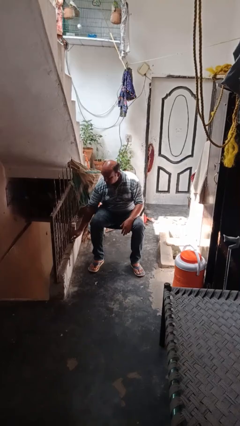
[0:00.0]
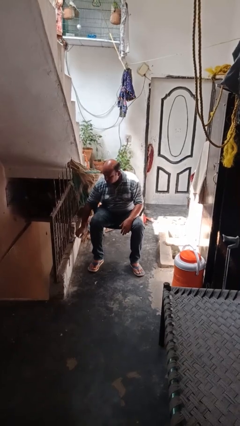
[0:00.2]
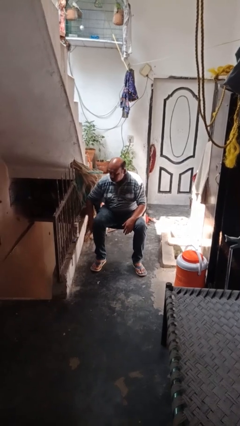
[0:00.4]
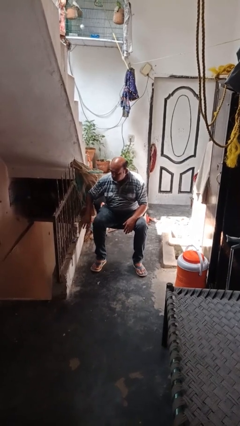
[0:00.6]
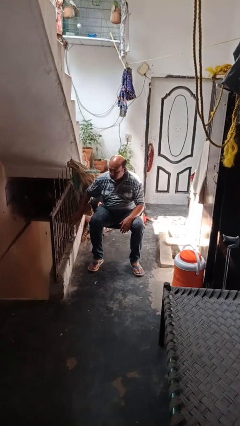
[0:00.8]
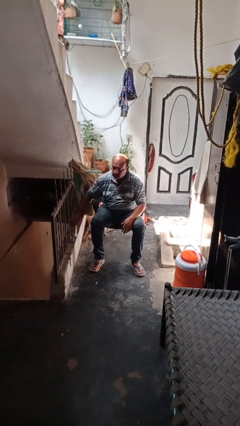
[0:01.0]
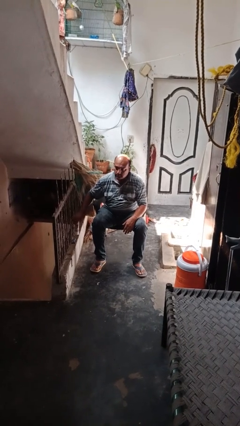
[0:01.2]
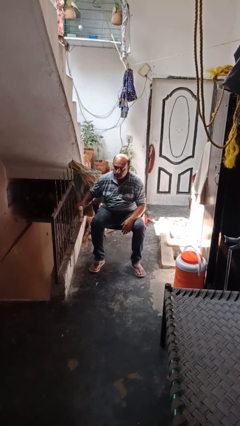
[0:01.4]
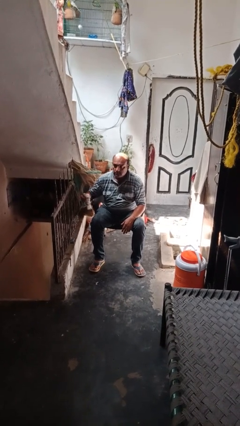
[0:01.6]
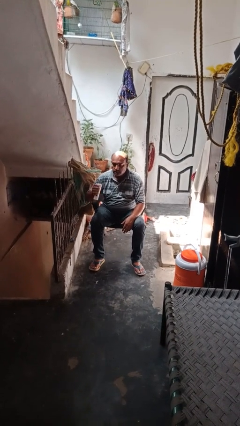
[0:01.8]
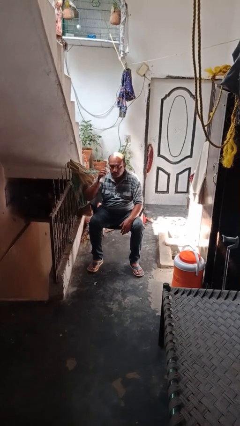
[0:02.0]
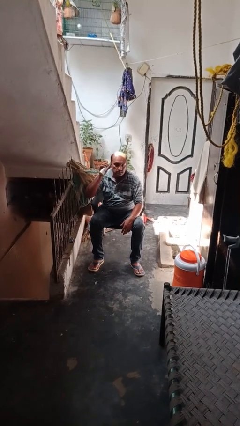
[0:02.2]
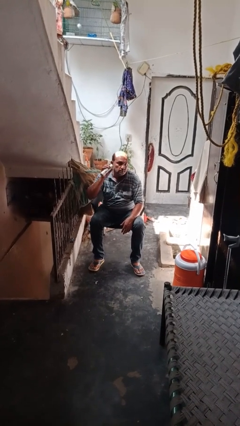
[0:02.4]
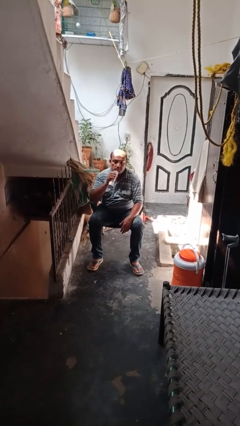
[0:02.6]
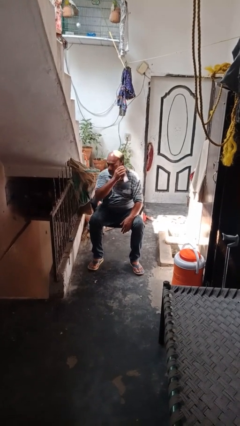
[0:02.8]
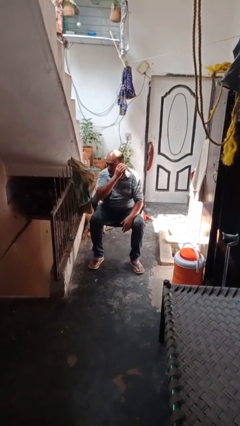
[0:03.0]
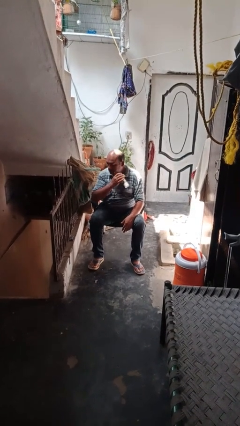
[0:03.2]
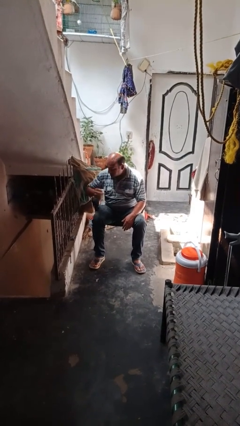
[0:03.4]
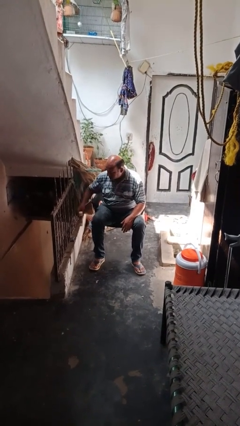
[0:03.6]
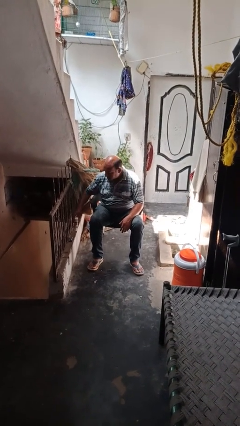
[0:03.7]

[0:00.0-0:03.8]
person applies shaving cream

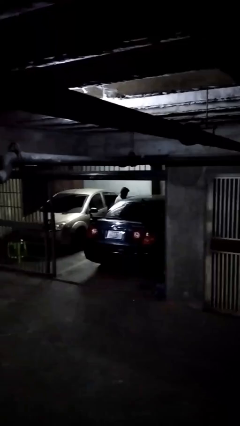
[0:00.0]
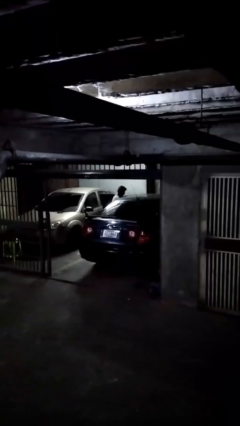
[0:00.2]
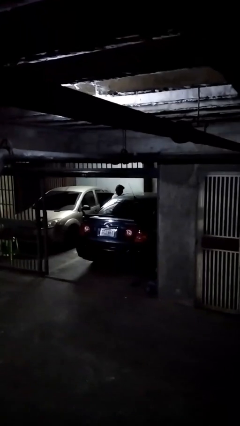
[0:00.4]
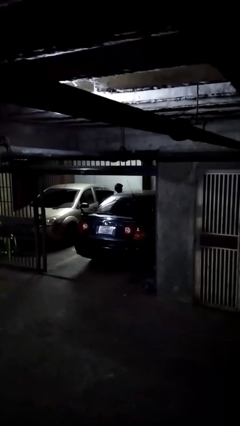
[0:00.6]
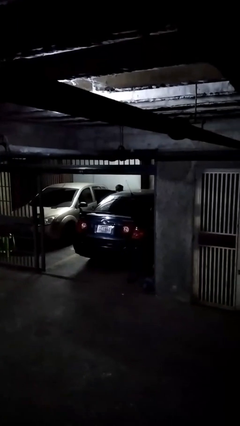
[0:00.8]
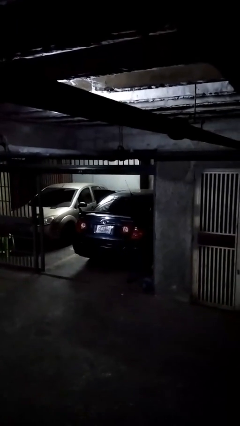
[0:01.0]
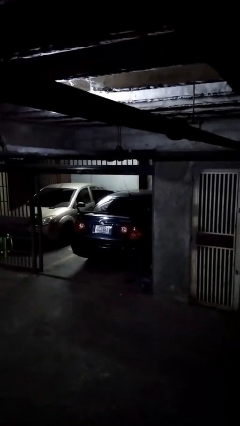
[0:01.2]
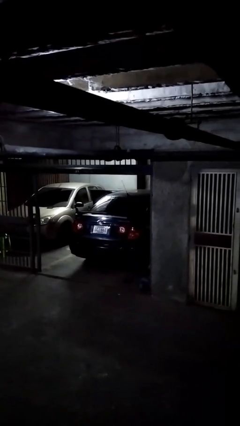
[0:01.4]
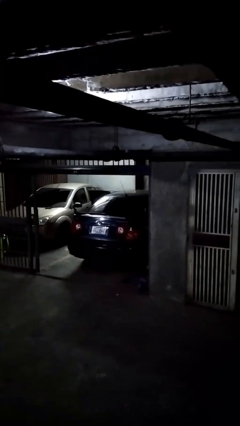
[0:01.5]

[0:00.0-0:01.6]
person enters car

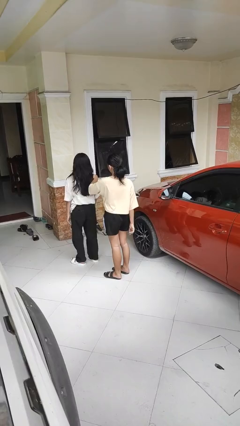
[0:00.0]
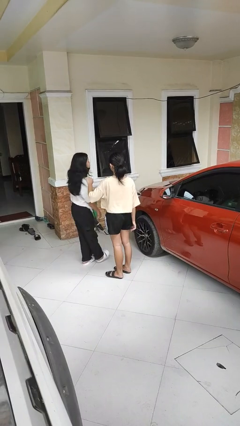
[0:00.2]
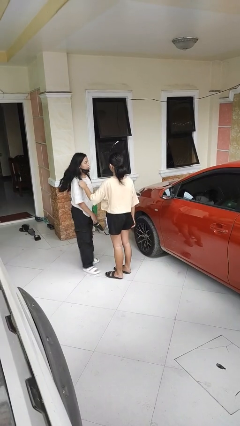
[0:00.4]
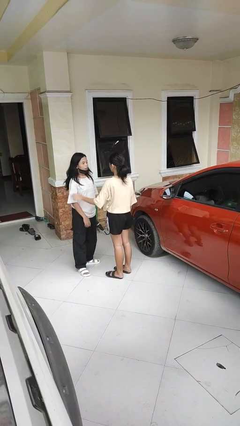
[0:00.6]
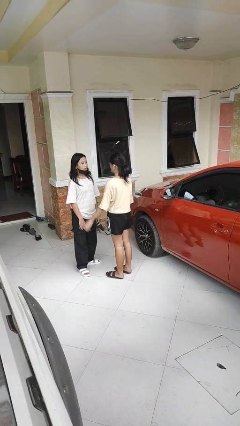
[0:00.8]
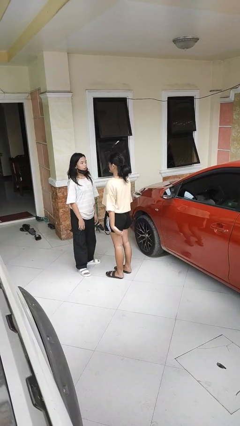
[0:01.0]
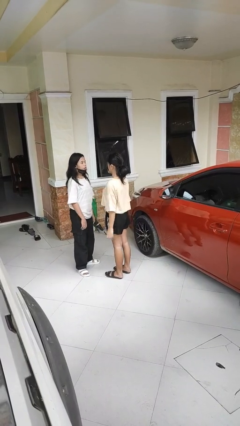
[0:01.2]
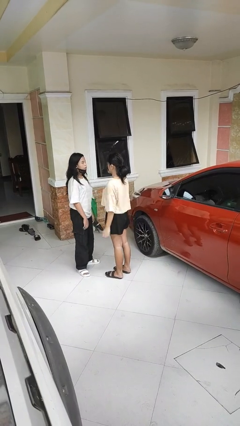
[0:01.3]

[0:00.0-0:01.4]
person spins person around

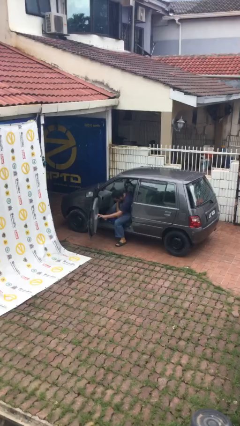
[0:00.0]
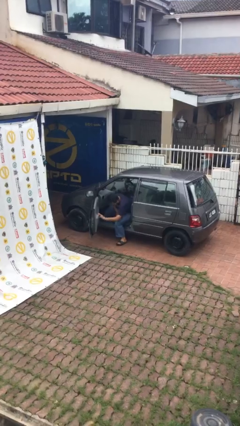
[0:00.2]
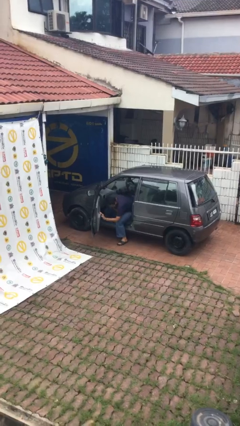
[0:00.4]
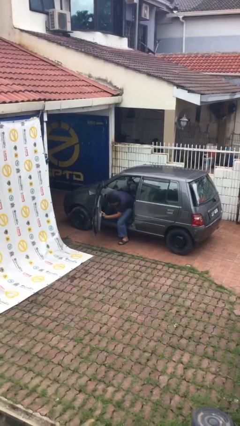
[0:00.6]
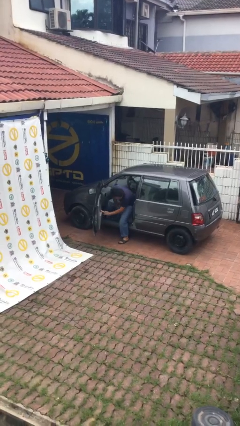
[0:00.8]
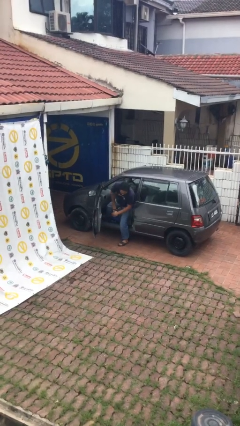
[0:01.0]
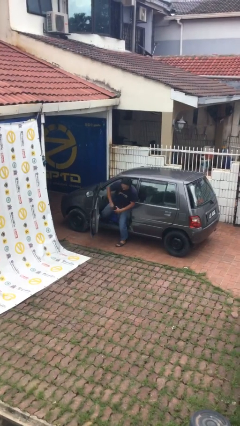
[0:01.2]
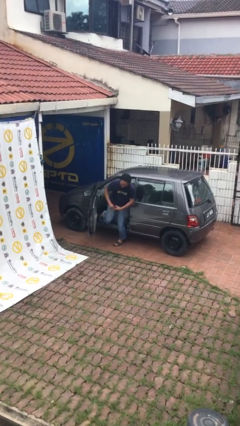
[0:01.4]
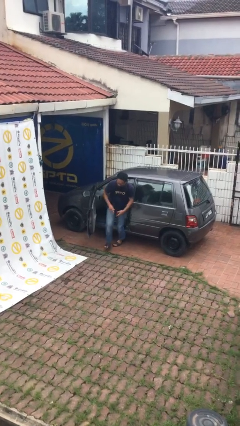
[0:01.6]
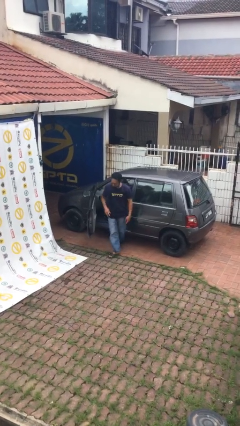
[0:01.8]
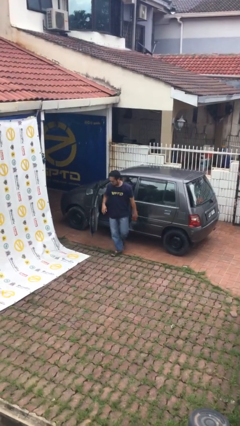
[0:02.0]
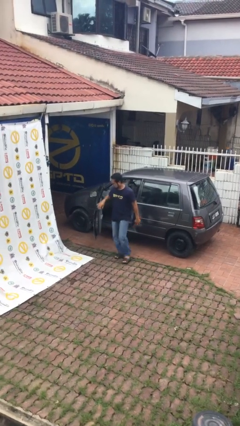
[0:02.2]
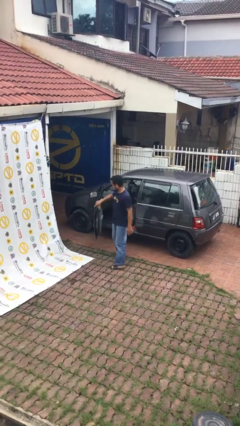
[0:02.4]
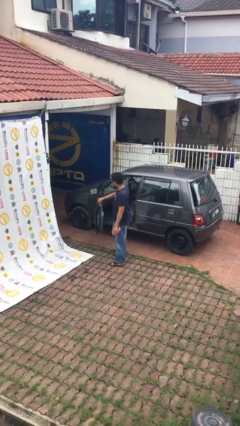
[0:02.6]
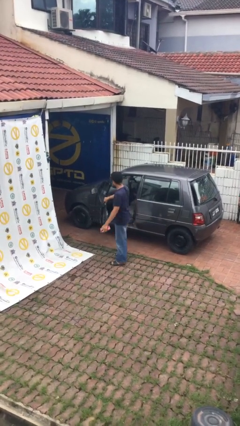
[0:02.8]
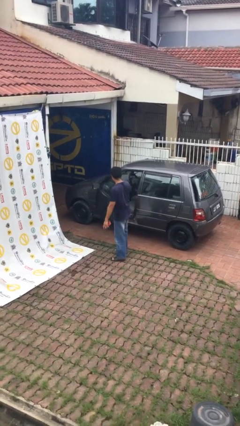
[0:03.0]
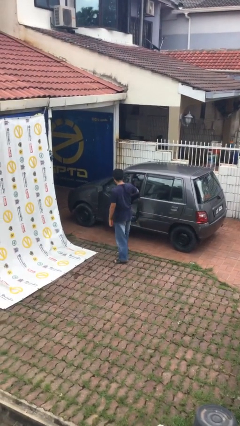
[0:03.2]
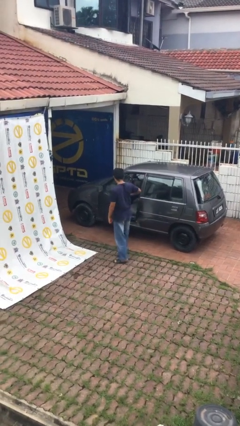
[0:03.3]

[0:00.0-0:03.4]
person exits car

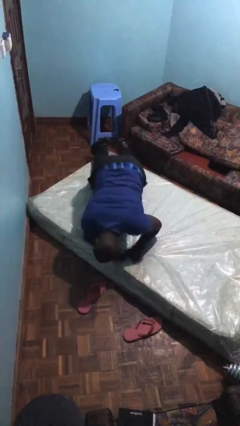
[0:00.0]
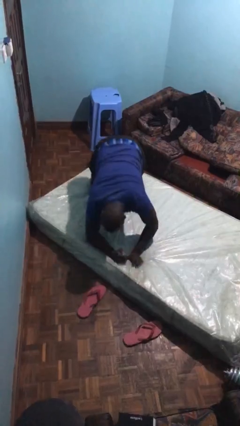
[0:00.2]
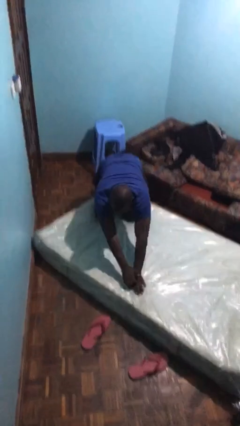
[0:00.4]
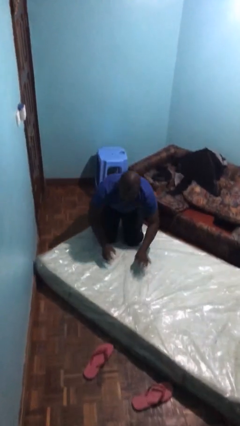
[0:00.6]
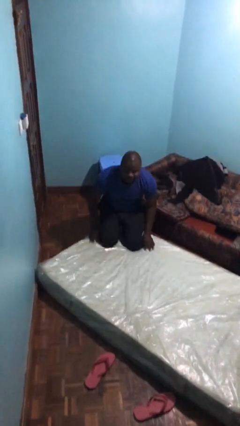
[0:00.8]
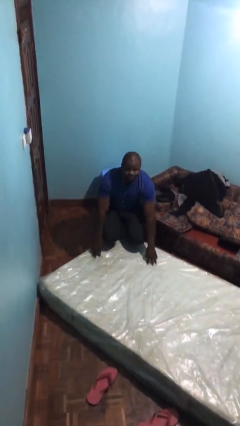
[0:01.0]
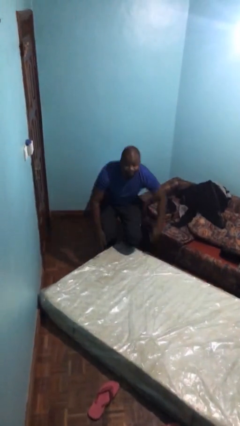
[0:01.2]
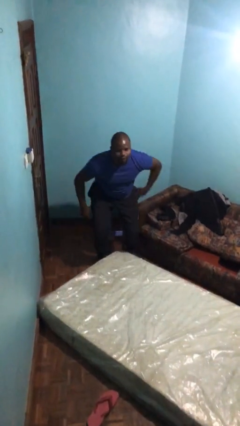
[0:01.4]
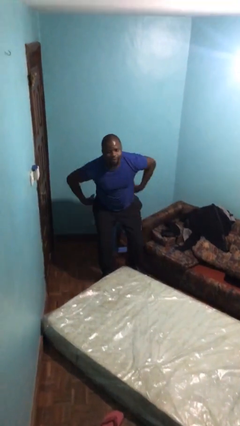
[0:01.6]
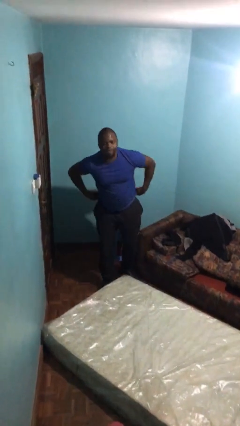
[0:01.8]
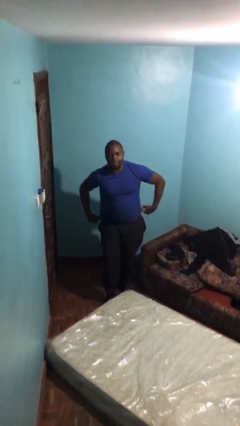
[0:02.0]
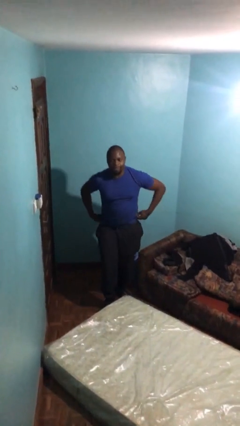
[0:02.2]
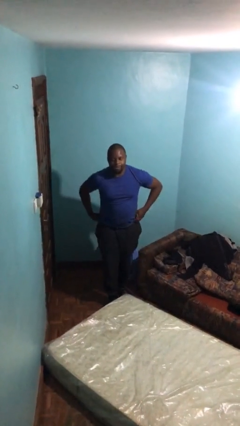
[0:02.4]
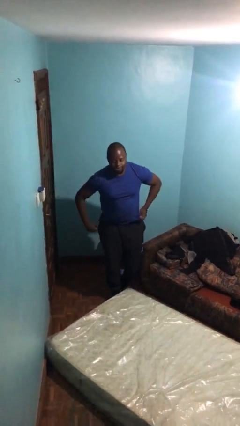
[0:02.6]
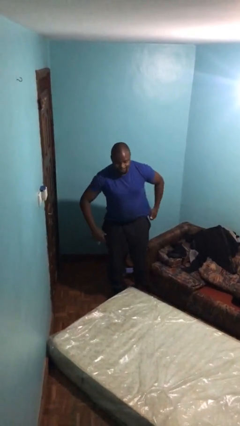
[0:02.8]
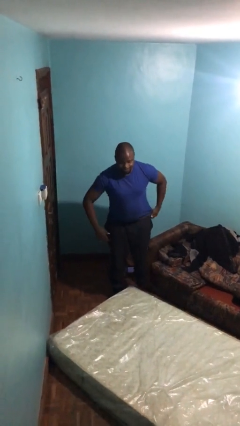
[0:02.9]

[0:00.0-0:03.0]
person stands up

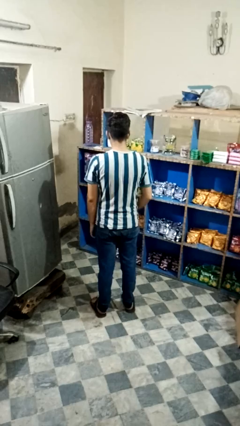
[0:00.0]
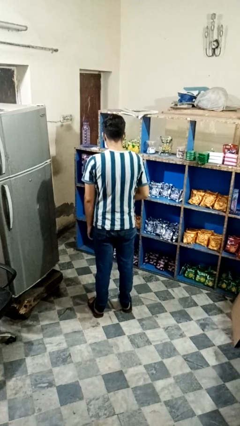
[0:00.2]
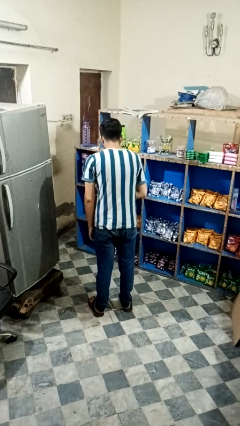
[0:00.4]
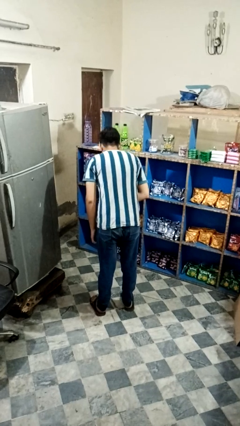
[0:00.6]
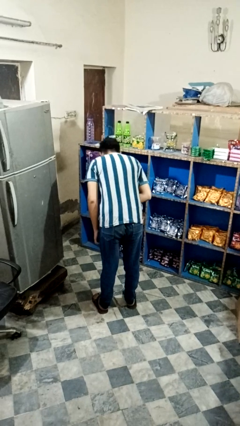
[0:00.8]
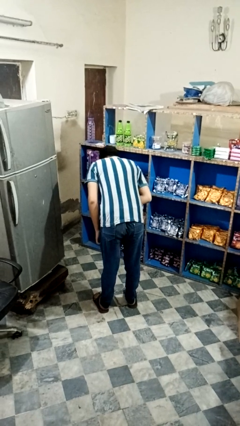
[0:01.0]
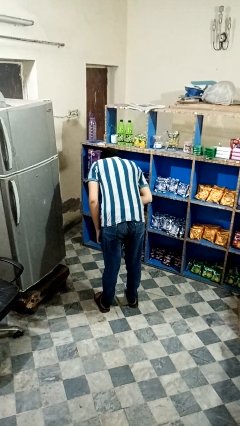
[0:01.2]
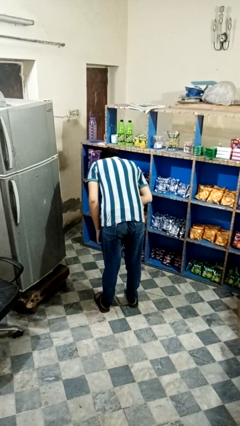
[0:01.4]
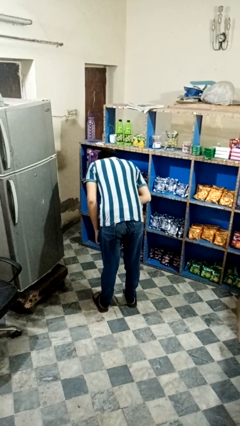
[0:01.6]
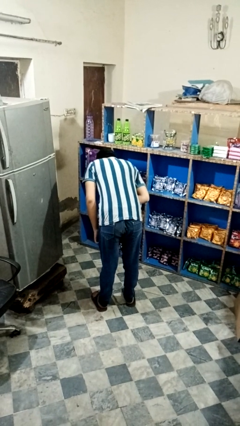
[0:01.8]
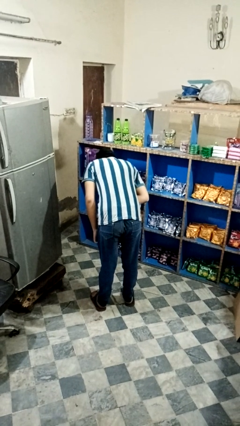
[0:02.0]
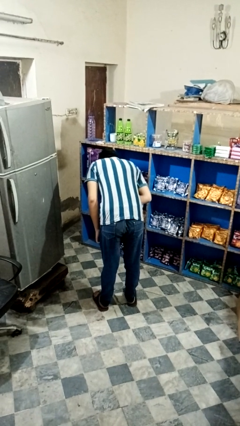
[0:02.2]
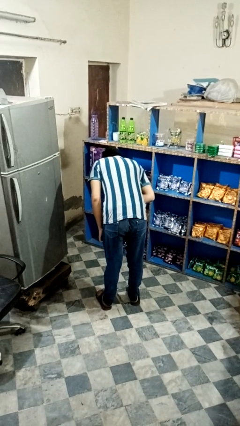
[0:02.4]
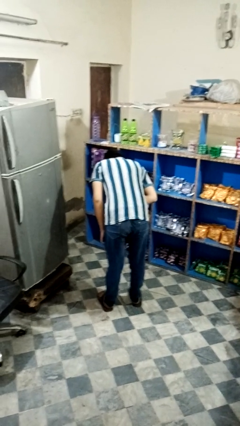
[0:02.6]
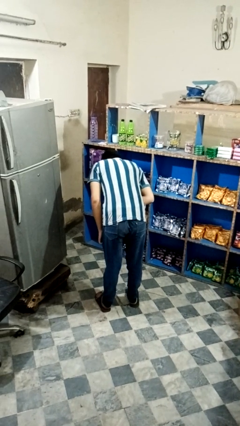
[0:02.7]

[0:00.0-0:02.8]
person bows

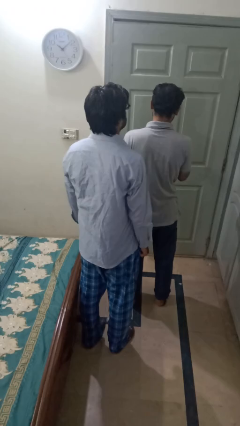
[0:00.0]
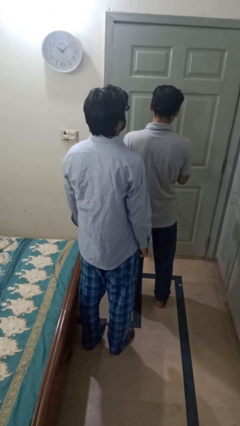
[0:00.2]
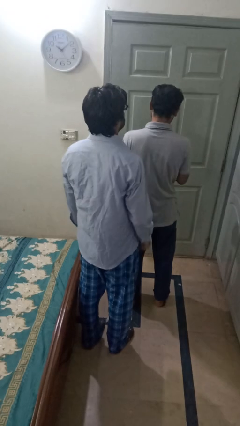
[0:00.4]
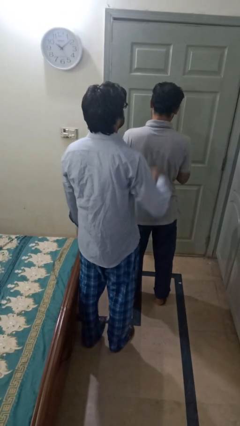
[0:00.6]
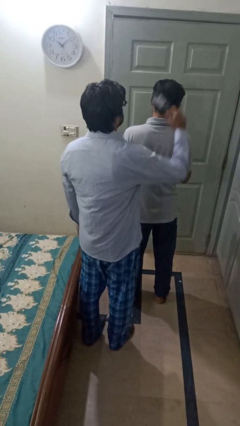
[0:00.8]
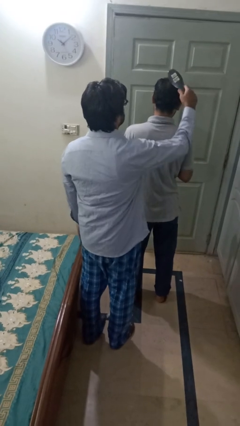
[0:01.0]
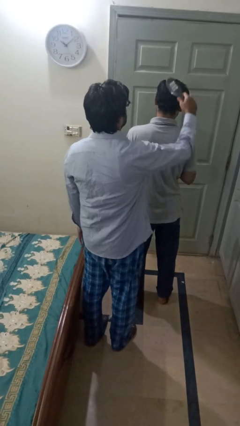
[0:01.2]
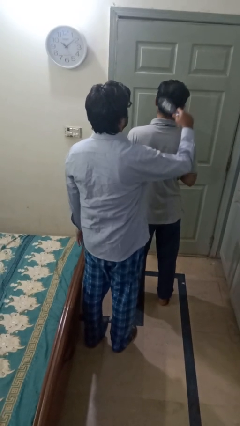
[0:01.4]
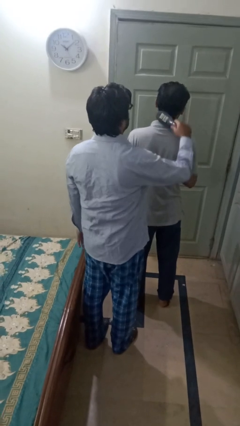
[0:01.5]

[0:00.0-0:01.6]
person brushes hair of person
